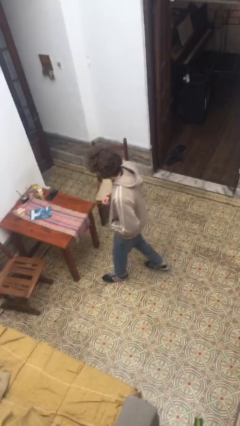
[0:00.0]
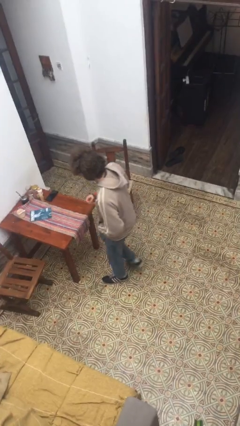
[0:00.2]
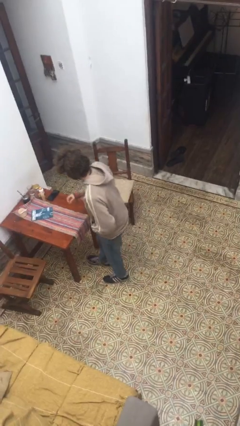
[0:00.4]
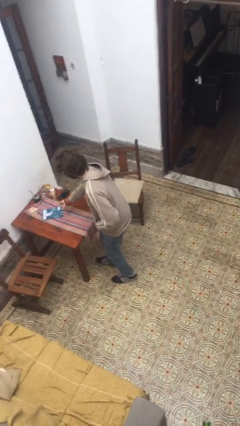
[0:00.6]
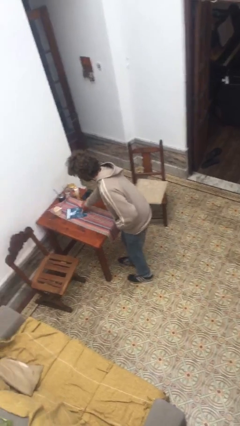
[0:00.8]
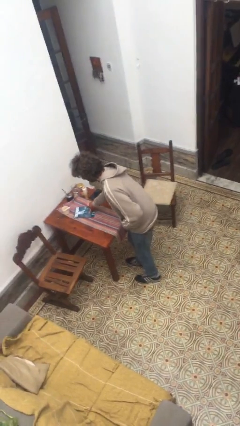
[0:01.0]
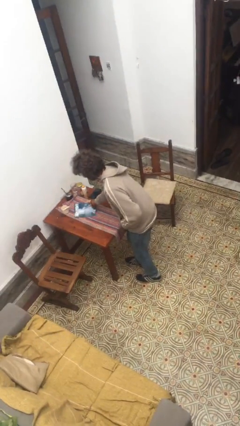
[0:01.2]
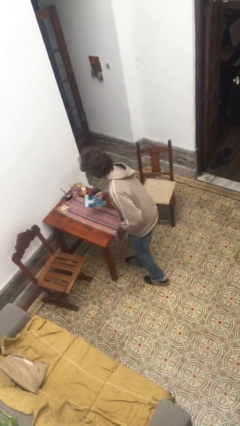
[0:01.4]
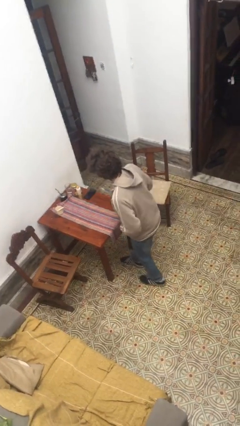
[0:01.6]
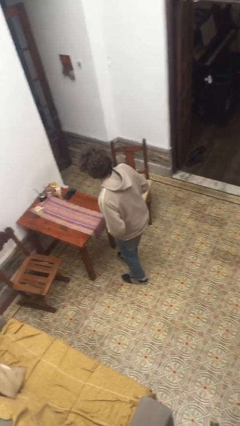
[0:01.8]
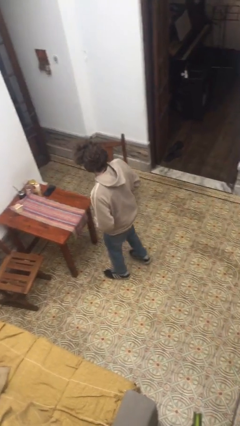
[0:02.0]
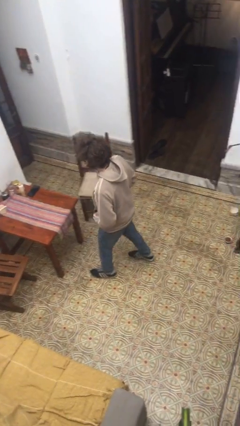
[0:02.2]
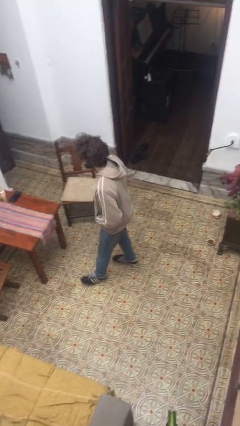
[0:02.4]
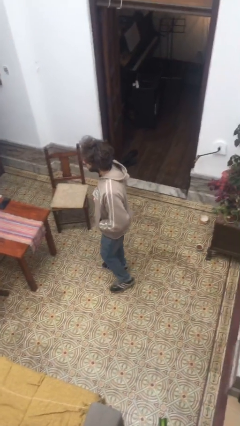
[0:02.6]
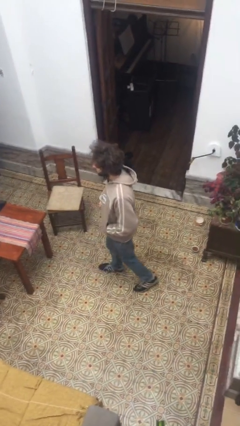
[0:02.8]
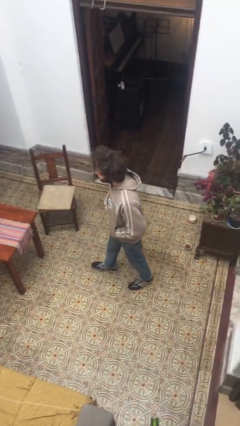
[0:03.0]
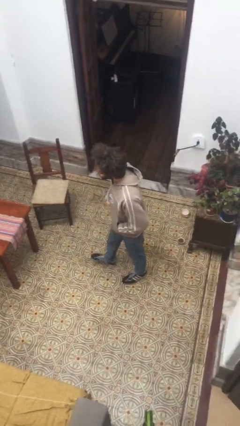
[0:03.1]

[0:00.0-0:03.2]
person picks up object from bed

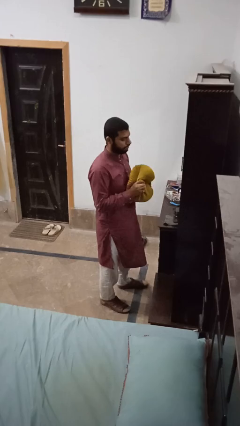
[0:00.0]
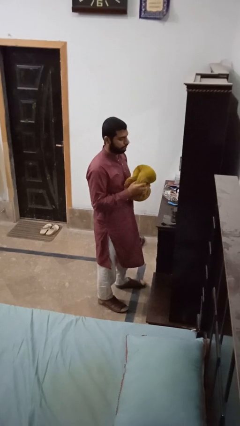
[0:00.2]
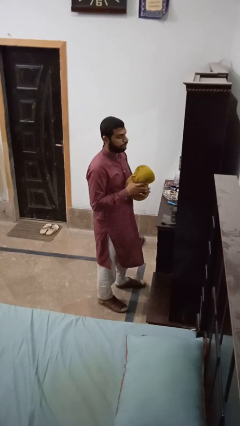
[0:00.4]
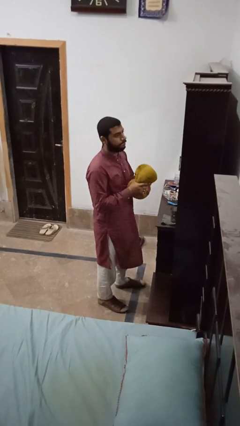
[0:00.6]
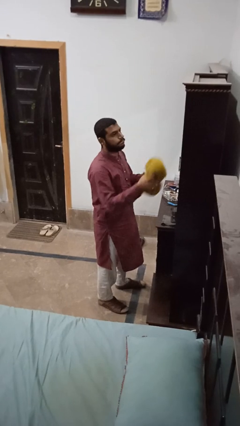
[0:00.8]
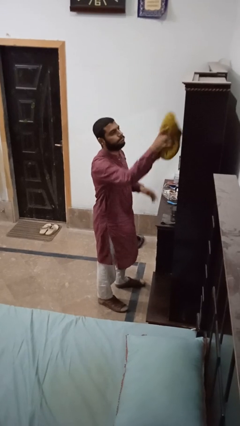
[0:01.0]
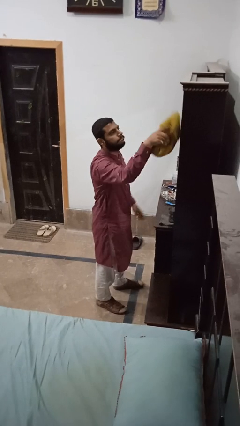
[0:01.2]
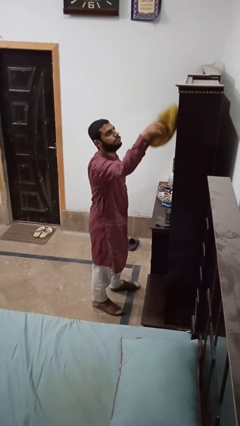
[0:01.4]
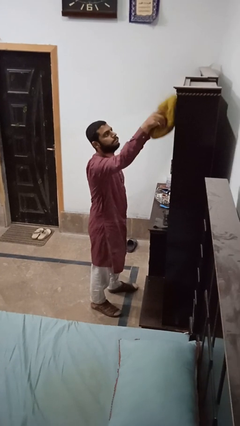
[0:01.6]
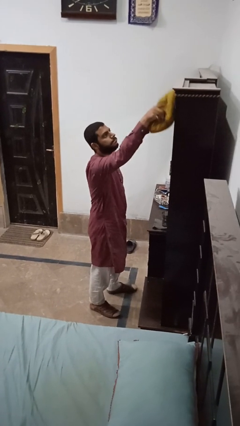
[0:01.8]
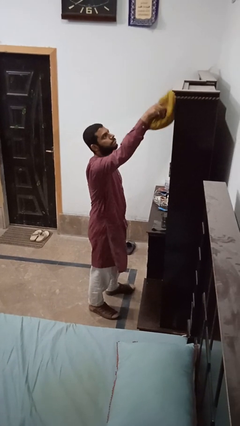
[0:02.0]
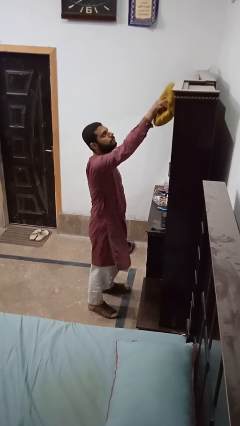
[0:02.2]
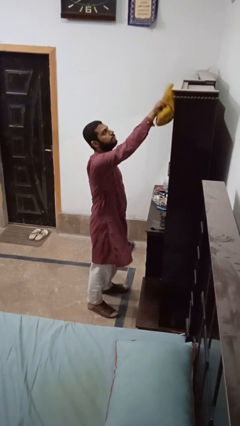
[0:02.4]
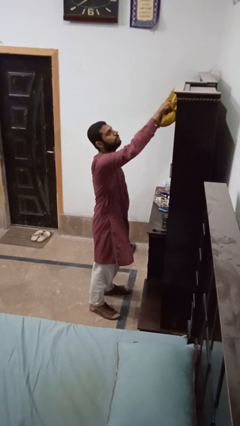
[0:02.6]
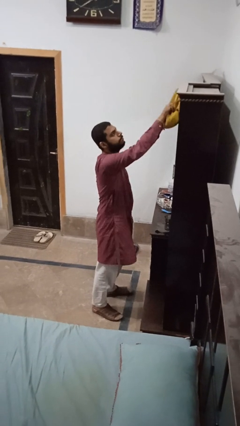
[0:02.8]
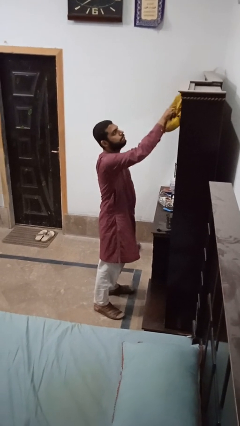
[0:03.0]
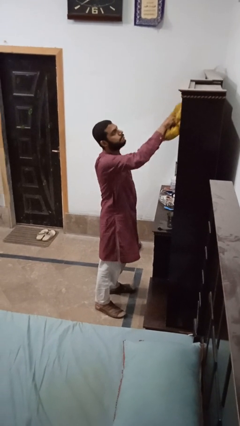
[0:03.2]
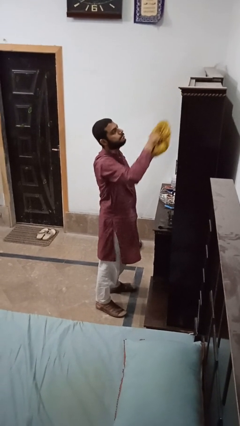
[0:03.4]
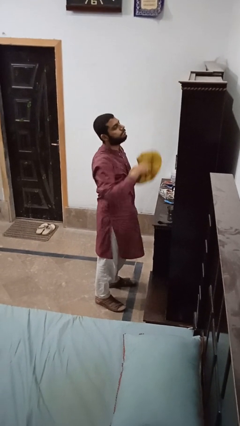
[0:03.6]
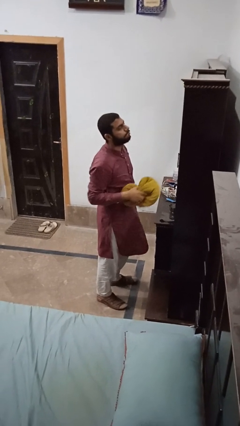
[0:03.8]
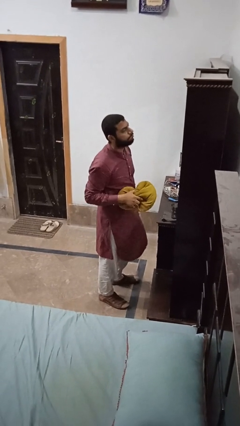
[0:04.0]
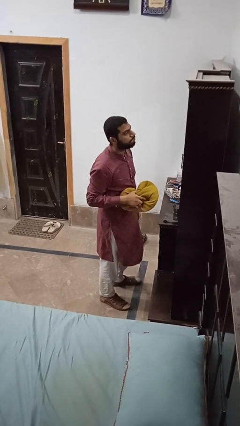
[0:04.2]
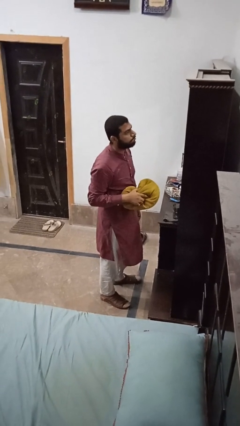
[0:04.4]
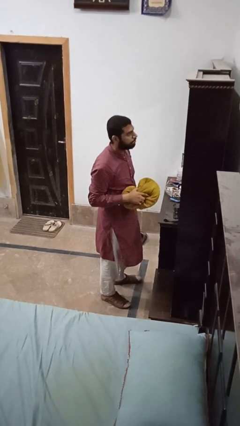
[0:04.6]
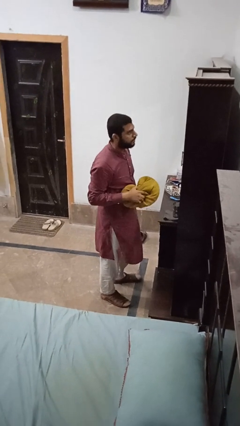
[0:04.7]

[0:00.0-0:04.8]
person dusts furniture

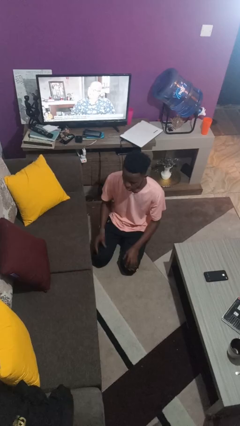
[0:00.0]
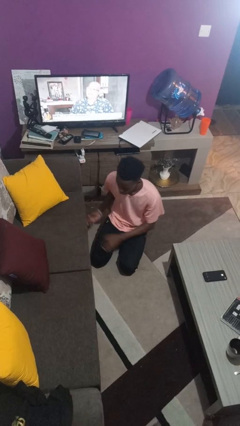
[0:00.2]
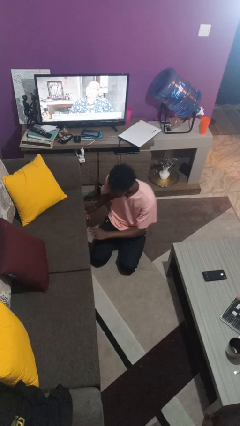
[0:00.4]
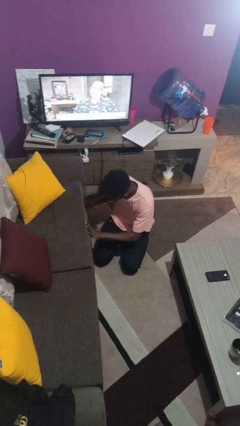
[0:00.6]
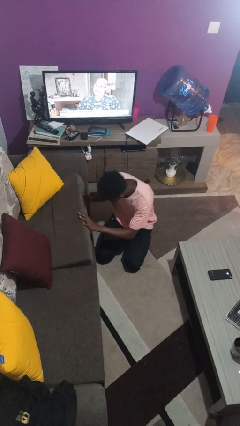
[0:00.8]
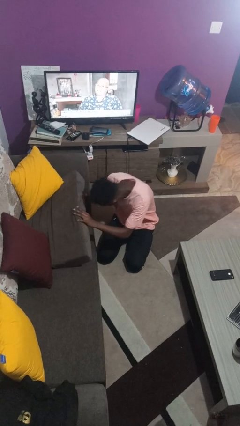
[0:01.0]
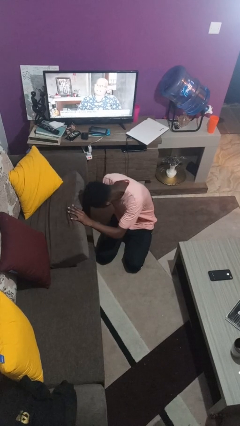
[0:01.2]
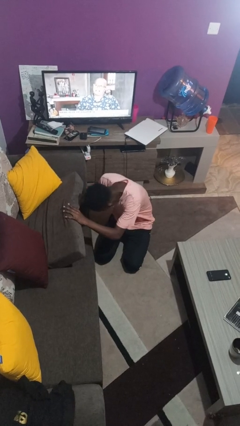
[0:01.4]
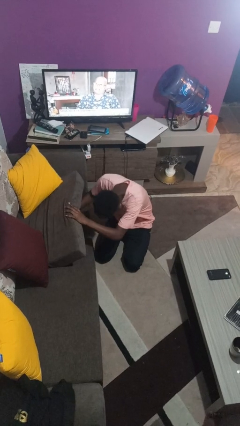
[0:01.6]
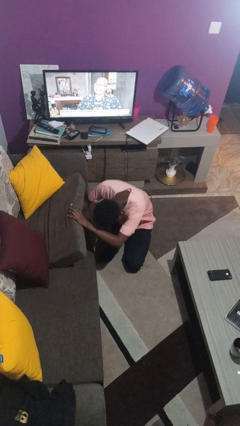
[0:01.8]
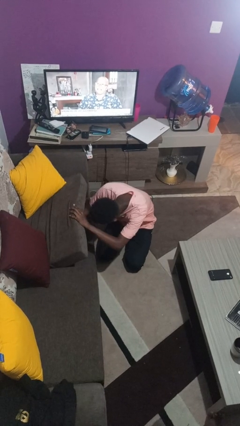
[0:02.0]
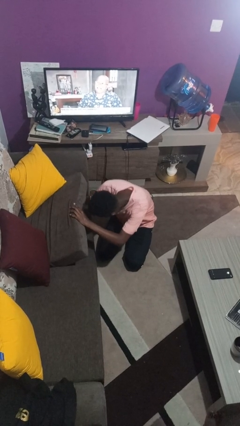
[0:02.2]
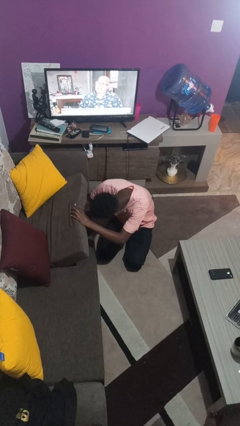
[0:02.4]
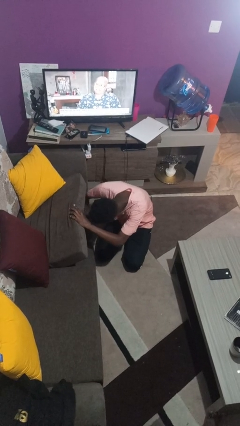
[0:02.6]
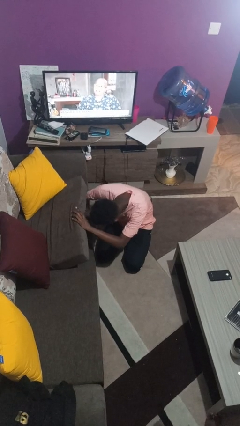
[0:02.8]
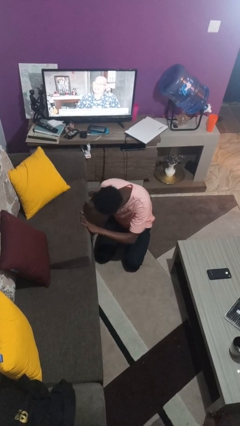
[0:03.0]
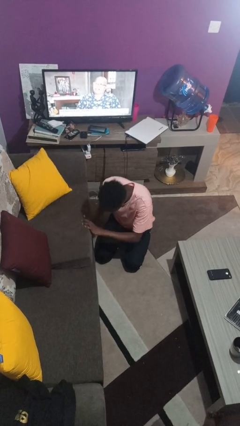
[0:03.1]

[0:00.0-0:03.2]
person searches under couch

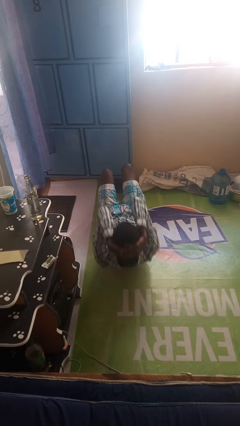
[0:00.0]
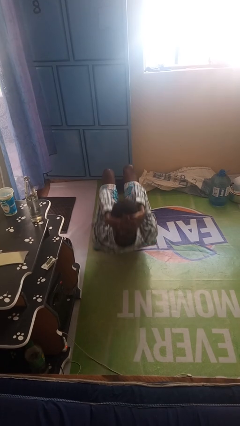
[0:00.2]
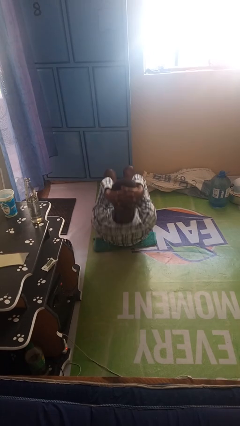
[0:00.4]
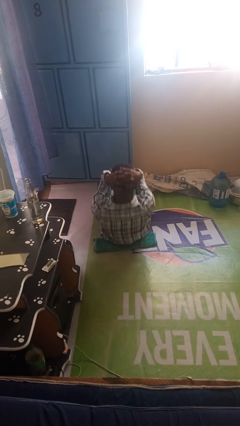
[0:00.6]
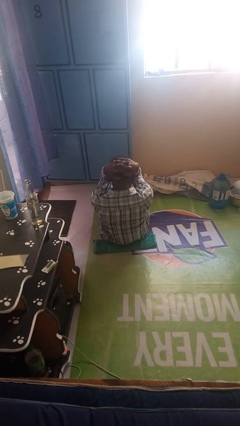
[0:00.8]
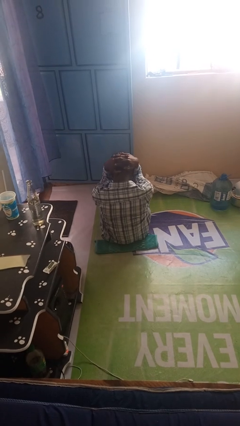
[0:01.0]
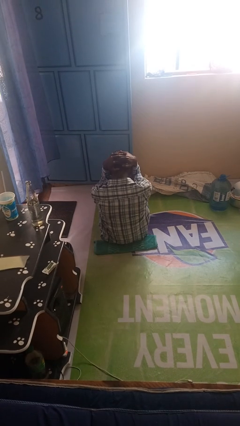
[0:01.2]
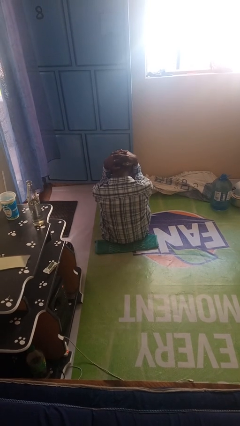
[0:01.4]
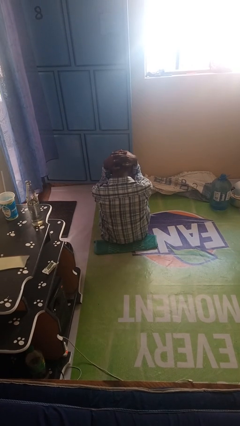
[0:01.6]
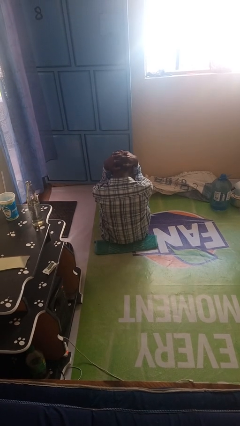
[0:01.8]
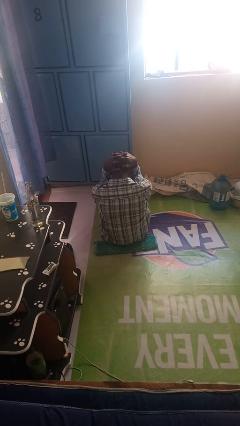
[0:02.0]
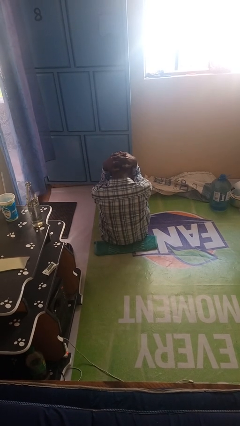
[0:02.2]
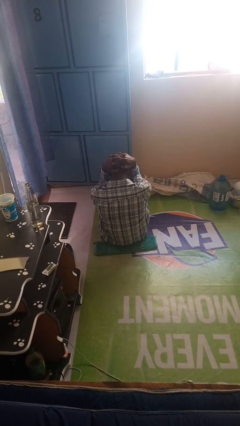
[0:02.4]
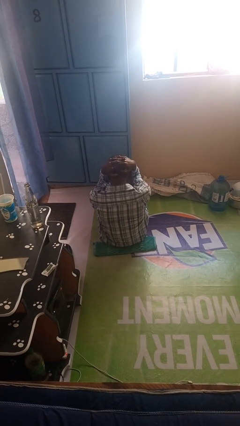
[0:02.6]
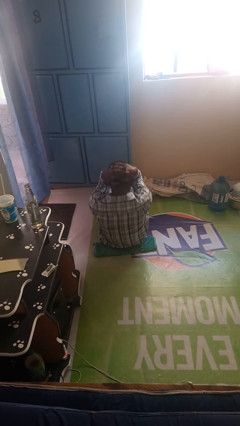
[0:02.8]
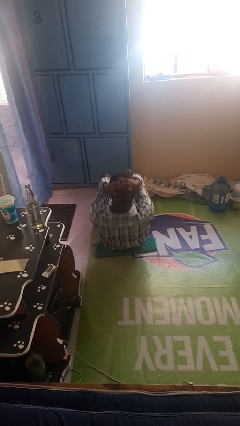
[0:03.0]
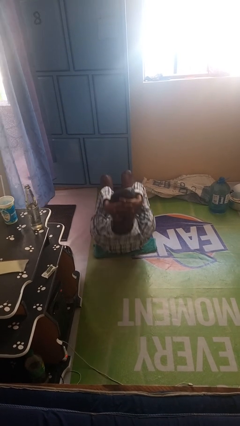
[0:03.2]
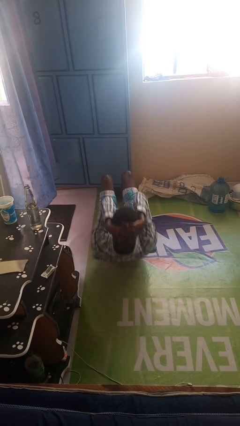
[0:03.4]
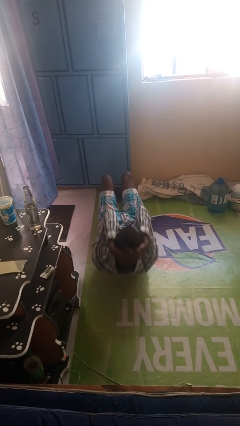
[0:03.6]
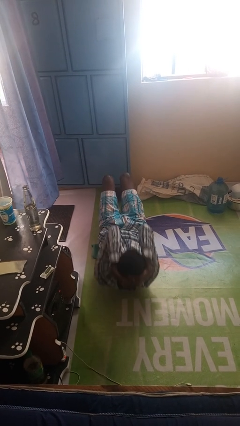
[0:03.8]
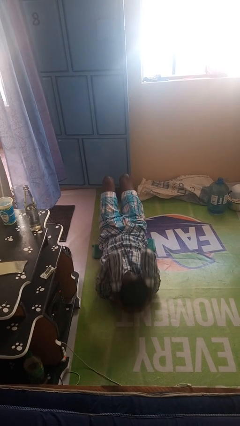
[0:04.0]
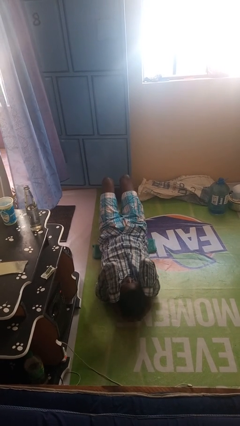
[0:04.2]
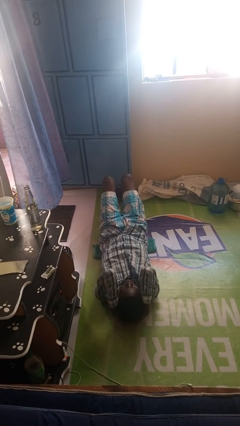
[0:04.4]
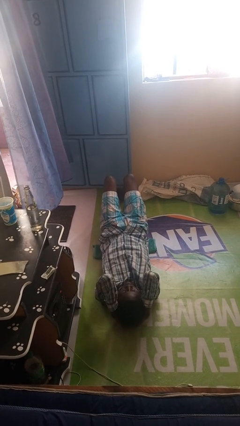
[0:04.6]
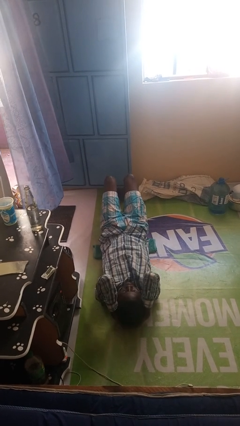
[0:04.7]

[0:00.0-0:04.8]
person exercises with situp

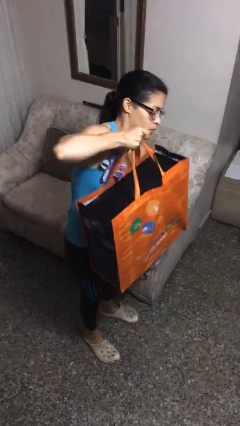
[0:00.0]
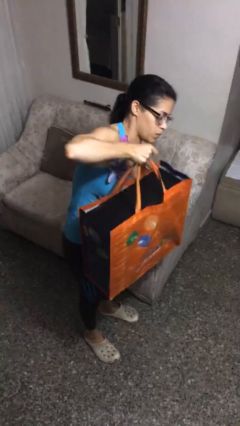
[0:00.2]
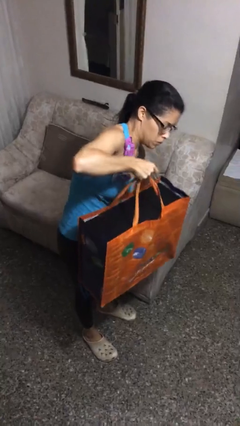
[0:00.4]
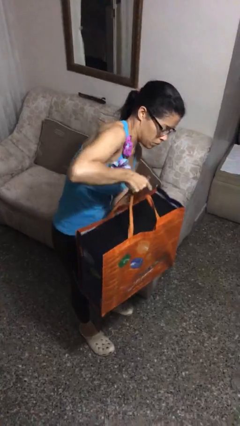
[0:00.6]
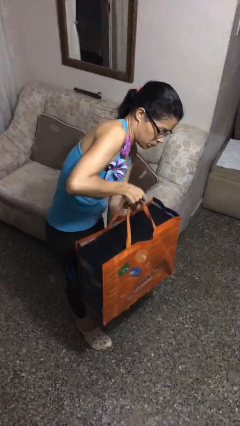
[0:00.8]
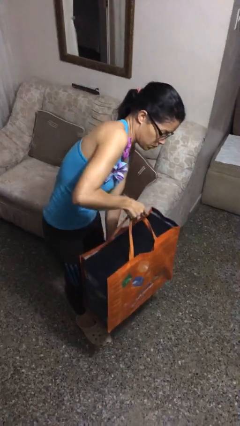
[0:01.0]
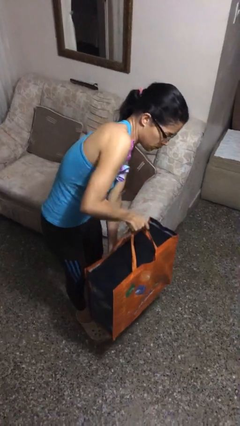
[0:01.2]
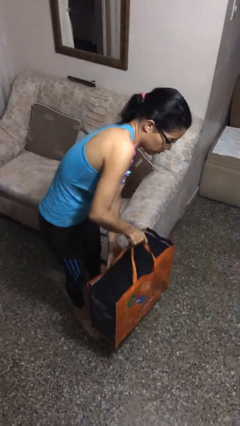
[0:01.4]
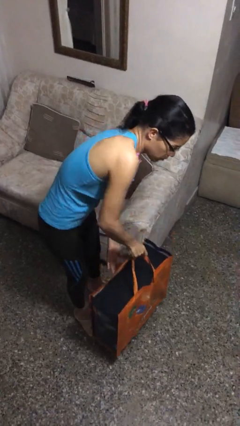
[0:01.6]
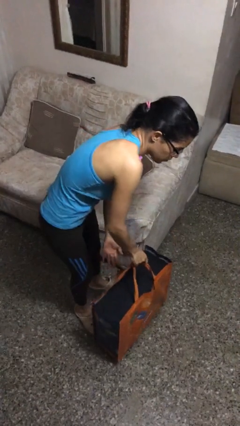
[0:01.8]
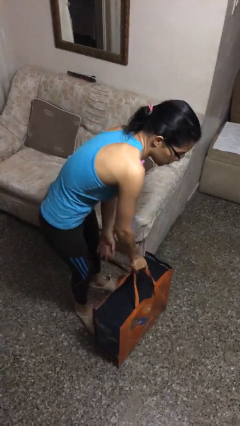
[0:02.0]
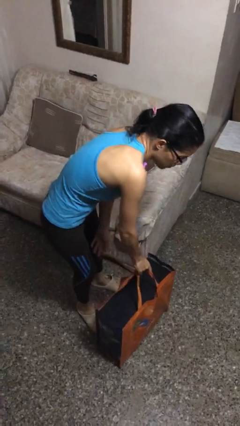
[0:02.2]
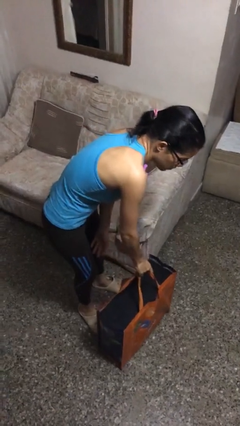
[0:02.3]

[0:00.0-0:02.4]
person puts down object on floor
